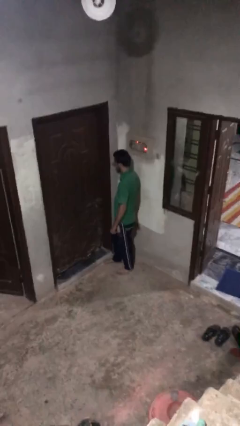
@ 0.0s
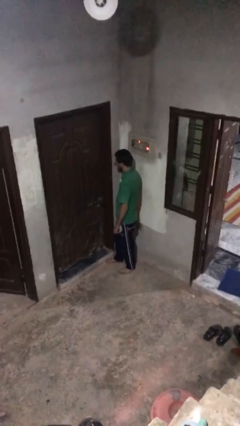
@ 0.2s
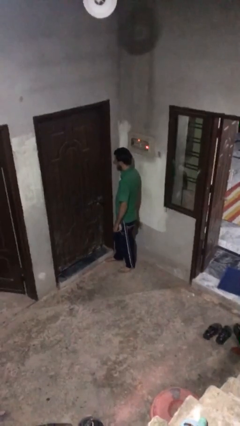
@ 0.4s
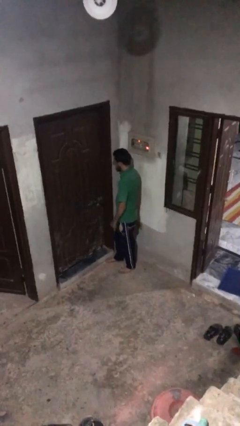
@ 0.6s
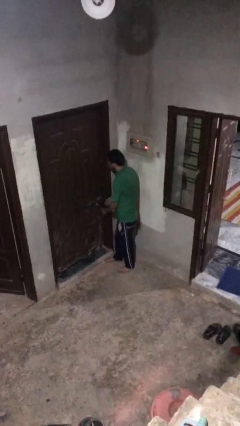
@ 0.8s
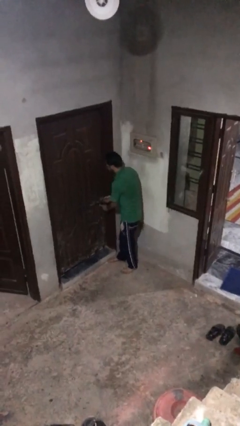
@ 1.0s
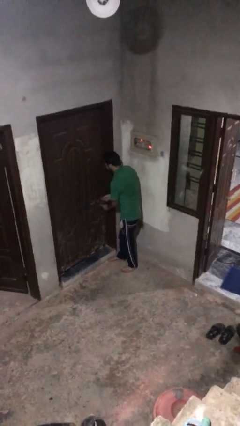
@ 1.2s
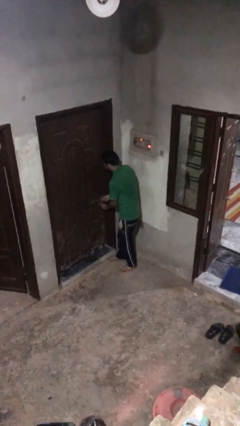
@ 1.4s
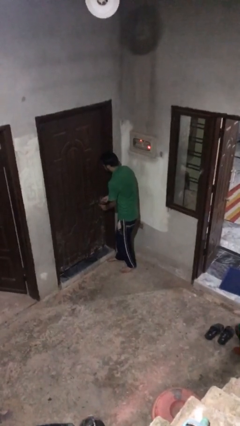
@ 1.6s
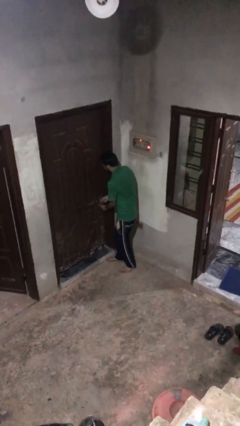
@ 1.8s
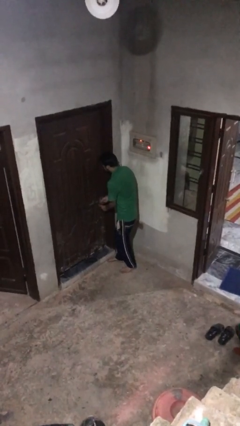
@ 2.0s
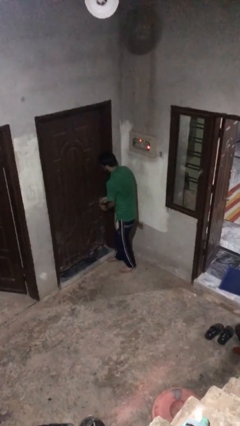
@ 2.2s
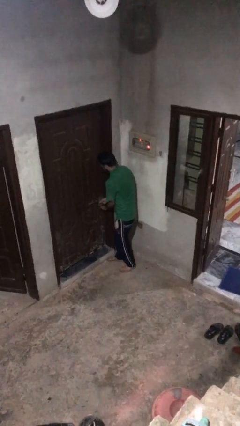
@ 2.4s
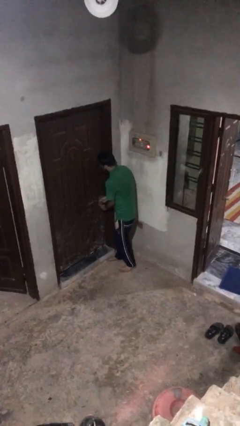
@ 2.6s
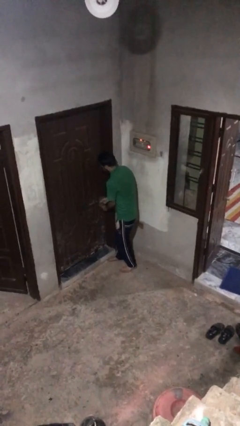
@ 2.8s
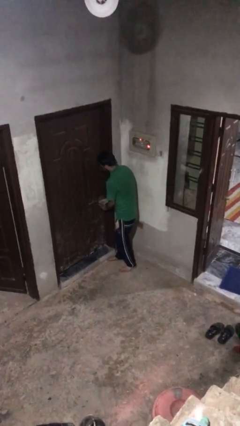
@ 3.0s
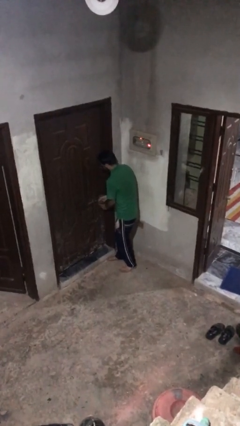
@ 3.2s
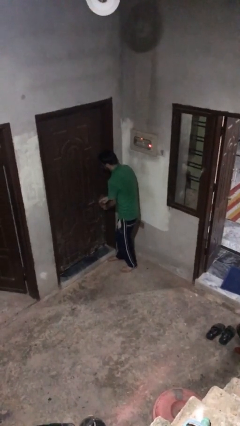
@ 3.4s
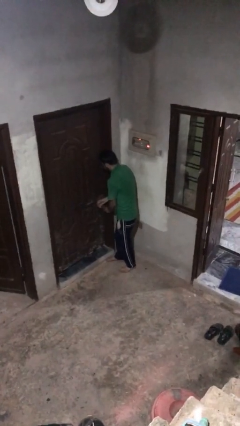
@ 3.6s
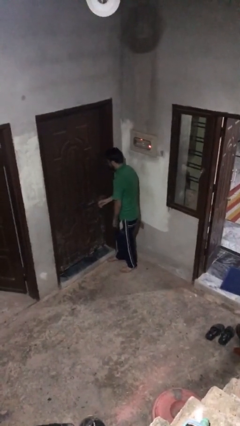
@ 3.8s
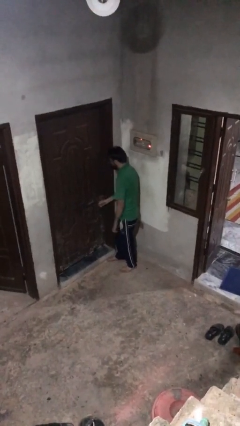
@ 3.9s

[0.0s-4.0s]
person unlocks door with keys

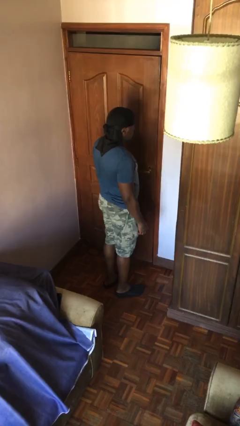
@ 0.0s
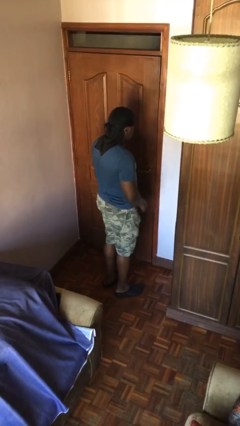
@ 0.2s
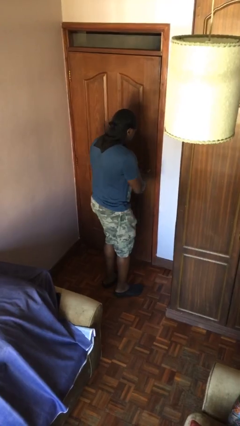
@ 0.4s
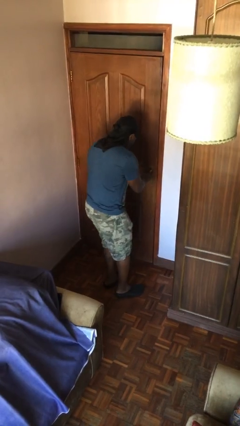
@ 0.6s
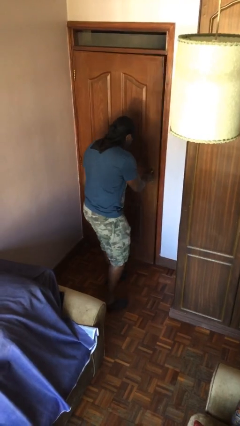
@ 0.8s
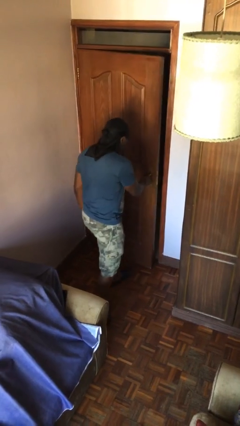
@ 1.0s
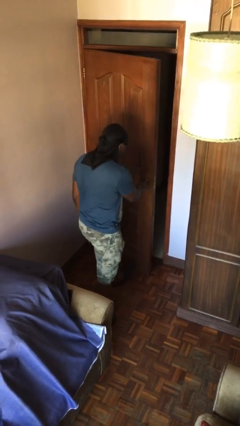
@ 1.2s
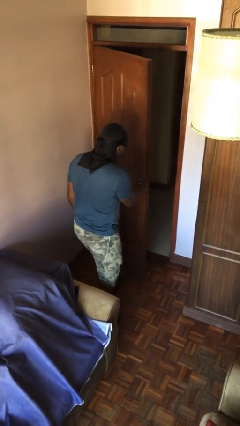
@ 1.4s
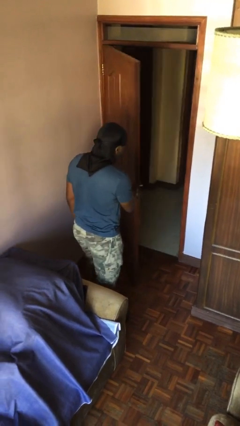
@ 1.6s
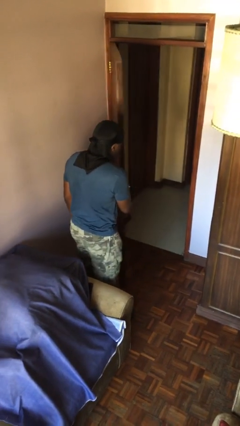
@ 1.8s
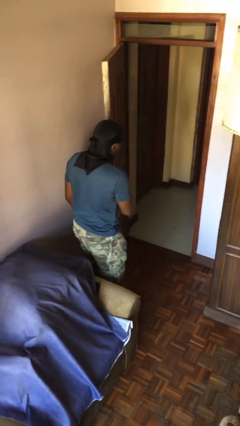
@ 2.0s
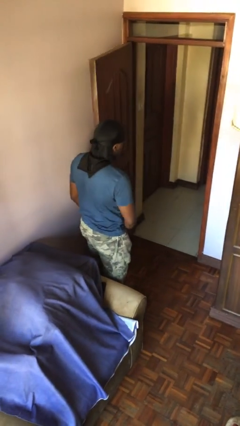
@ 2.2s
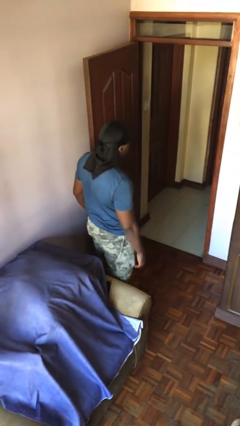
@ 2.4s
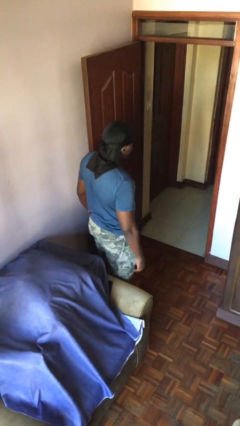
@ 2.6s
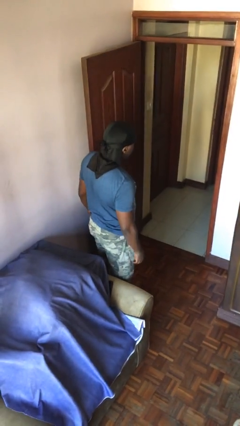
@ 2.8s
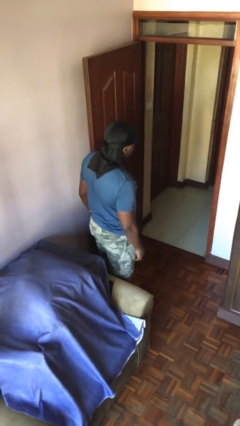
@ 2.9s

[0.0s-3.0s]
person opens facility door

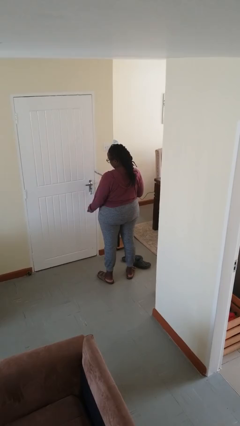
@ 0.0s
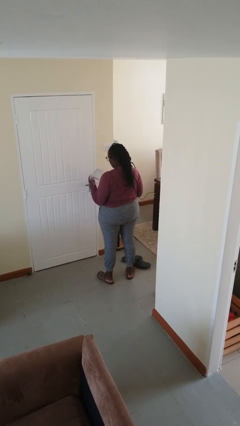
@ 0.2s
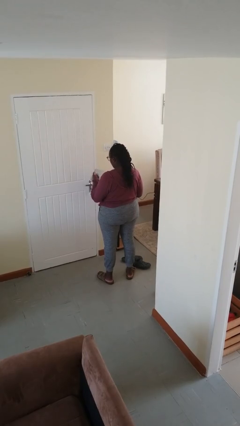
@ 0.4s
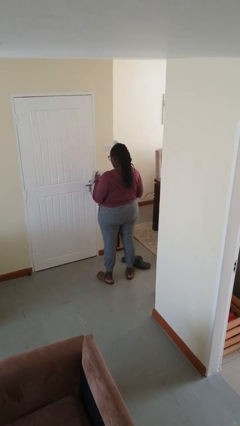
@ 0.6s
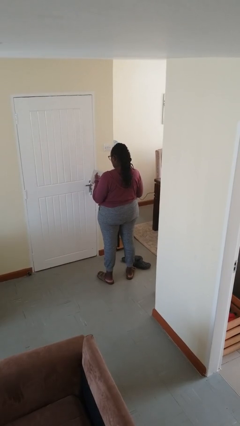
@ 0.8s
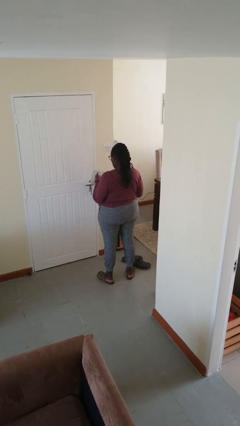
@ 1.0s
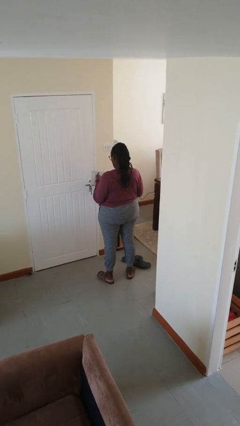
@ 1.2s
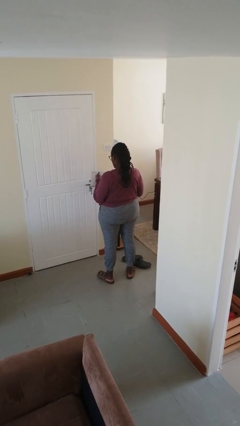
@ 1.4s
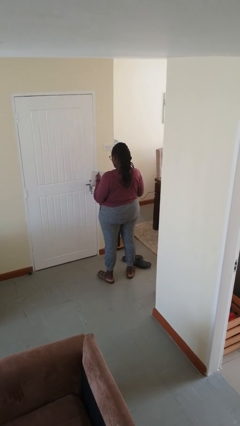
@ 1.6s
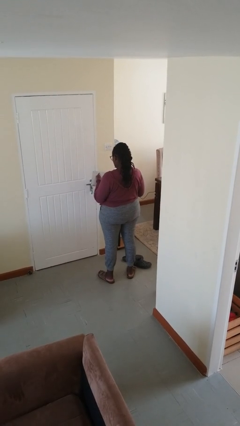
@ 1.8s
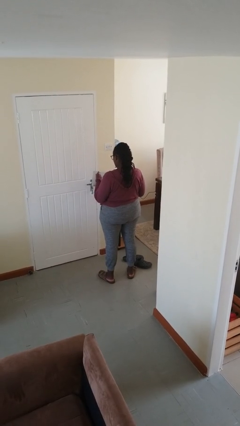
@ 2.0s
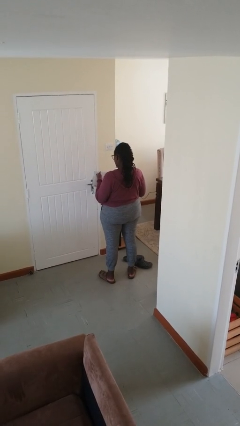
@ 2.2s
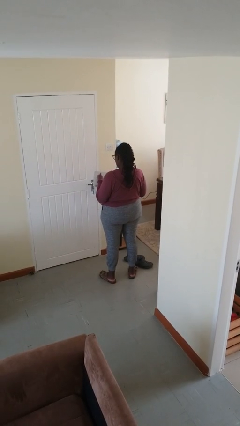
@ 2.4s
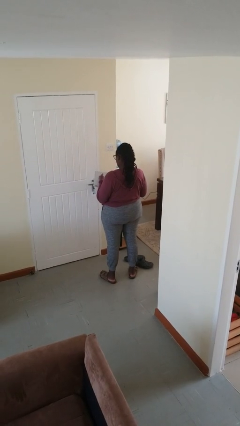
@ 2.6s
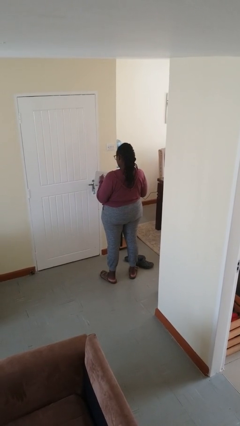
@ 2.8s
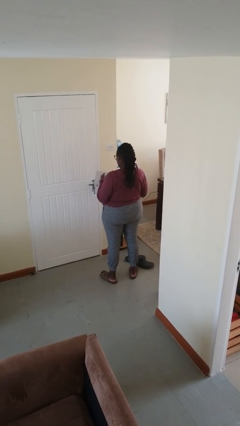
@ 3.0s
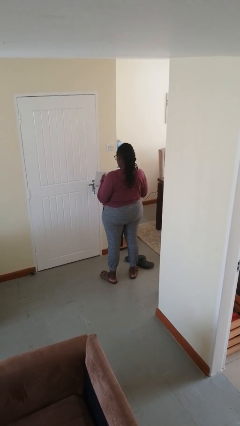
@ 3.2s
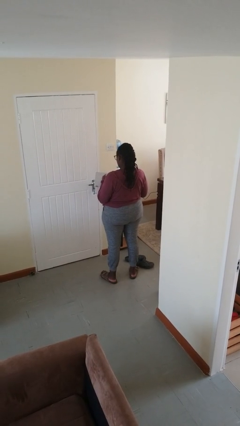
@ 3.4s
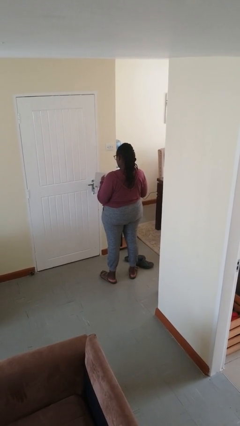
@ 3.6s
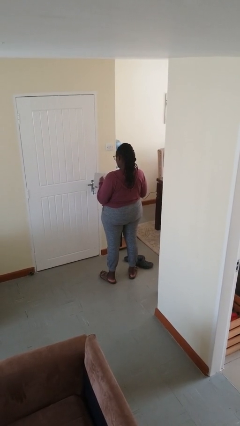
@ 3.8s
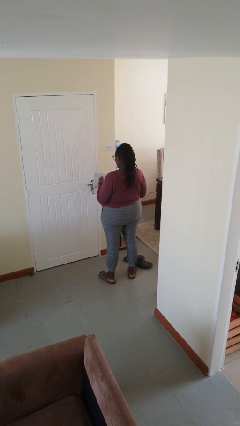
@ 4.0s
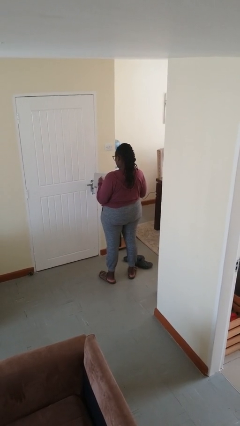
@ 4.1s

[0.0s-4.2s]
person taps object with finger

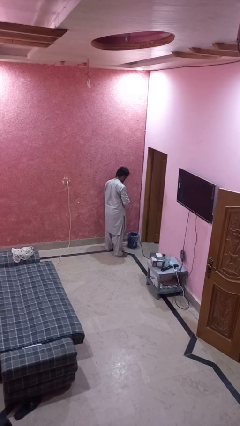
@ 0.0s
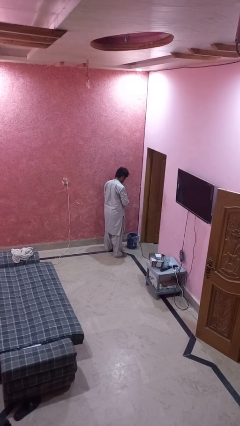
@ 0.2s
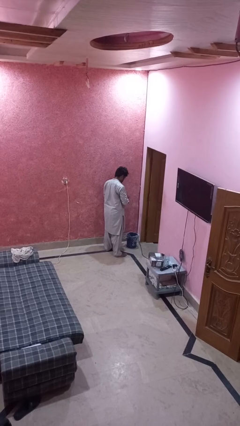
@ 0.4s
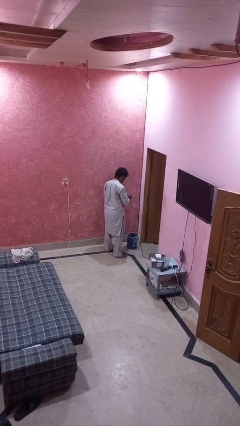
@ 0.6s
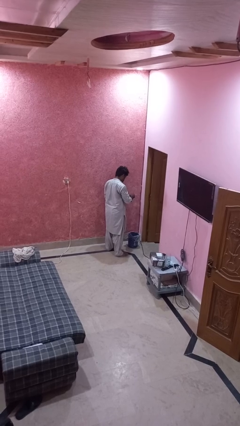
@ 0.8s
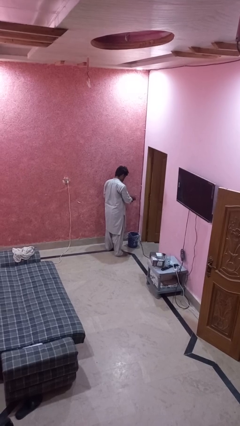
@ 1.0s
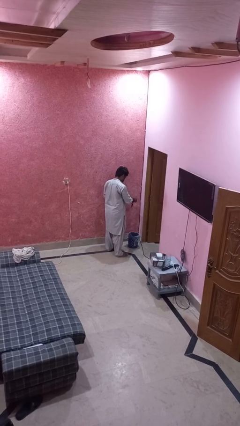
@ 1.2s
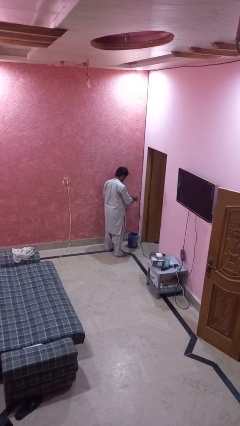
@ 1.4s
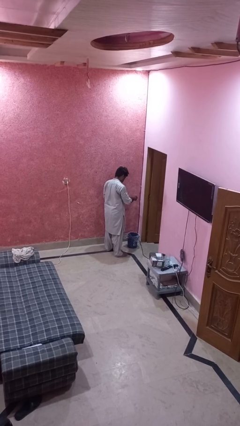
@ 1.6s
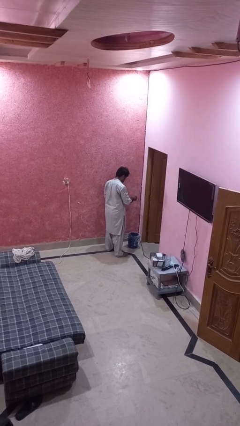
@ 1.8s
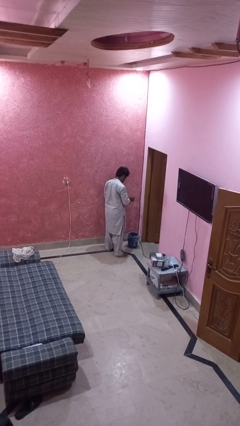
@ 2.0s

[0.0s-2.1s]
person discards trash

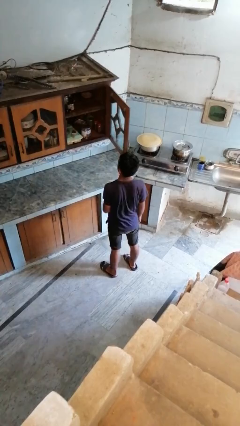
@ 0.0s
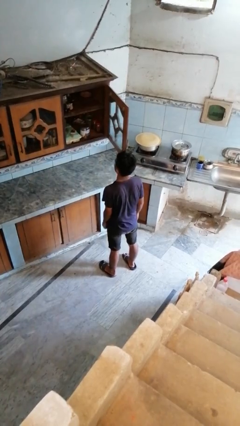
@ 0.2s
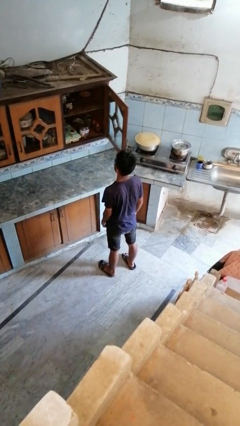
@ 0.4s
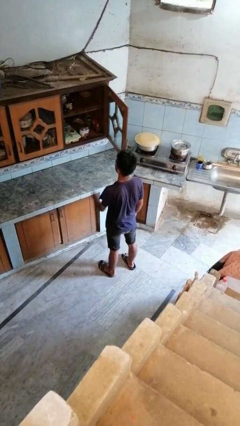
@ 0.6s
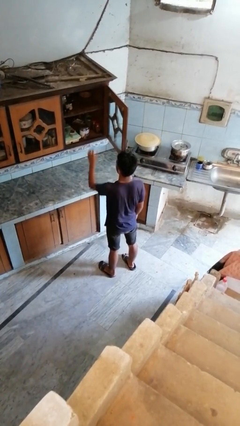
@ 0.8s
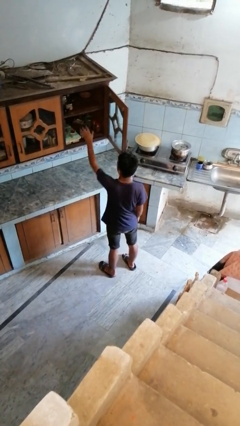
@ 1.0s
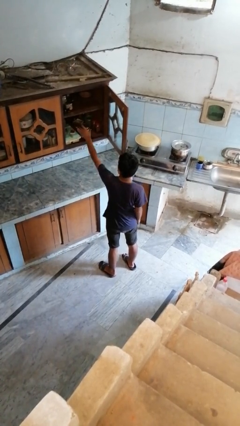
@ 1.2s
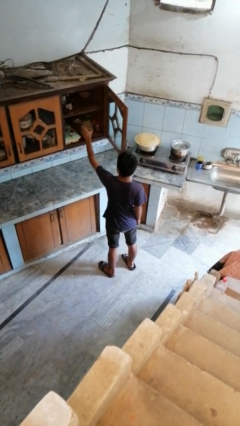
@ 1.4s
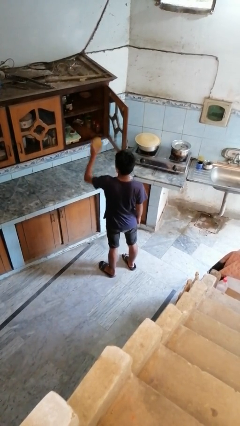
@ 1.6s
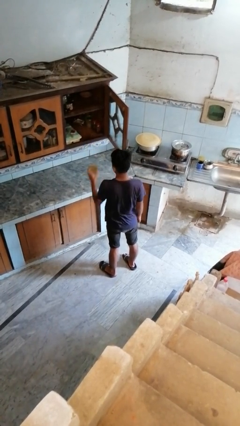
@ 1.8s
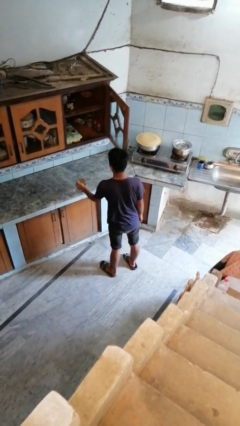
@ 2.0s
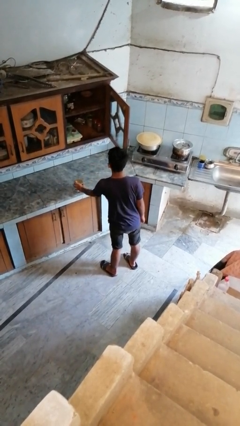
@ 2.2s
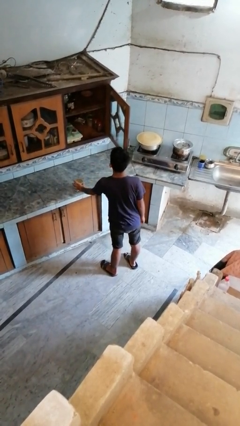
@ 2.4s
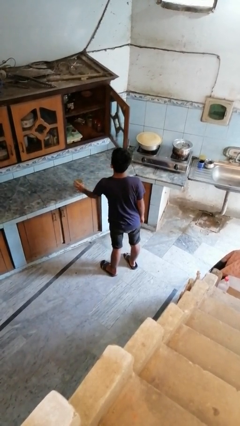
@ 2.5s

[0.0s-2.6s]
person takes object from cabinet

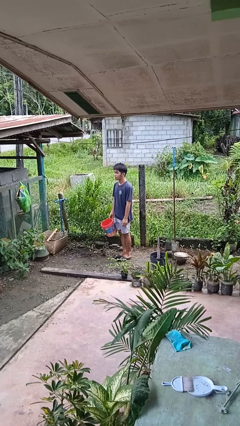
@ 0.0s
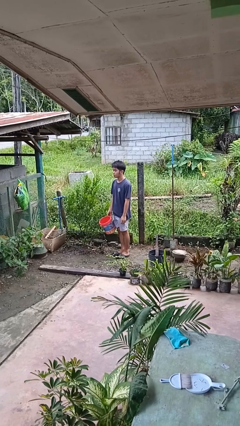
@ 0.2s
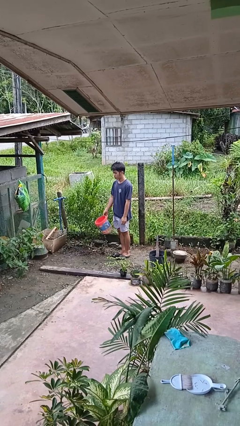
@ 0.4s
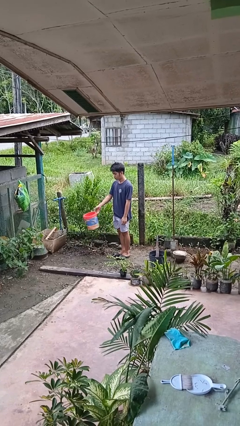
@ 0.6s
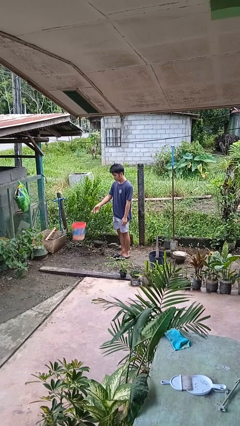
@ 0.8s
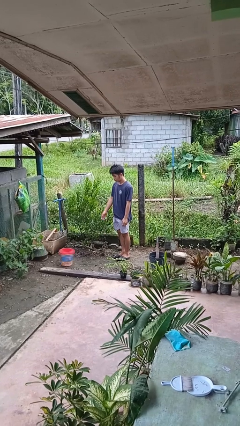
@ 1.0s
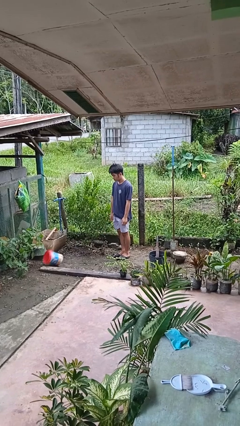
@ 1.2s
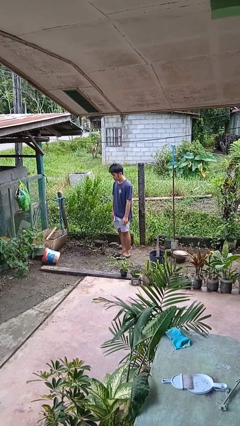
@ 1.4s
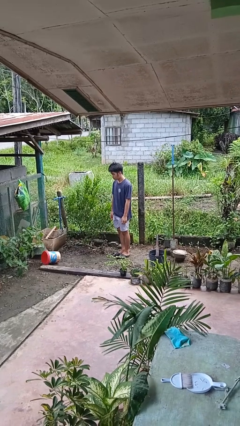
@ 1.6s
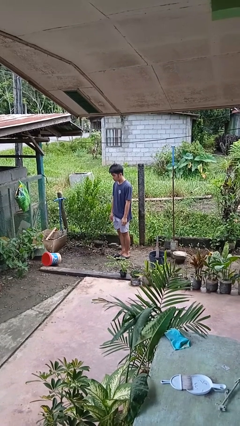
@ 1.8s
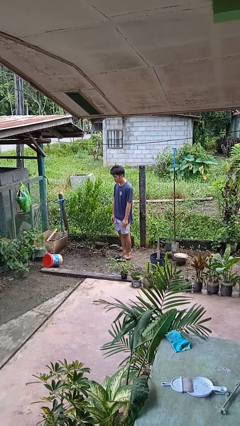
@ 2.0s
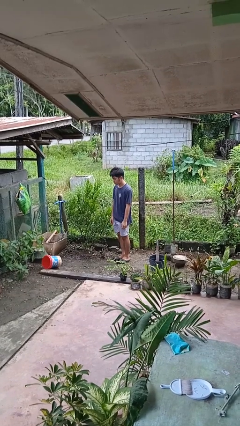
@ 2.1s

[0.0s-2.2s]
person throws object into air
